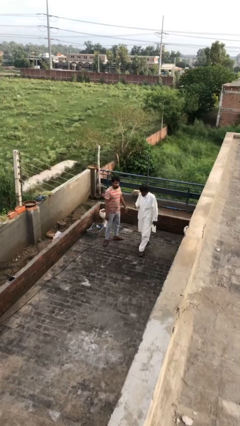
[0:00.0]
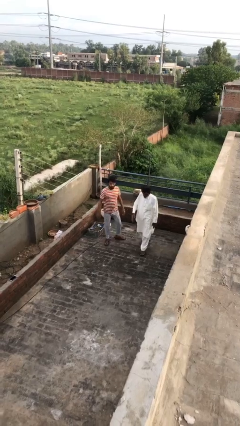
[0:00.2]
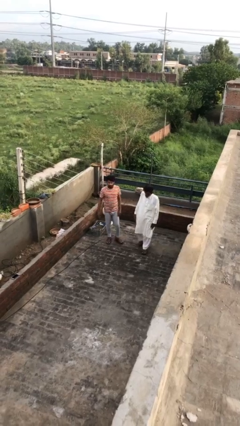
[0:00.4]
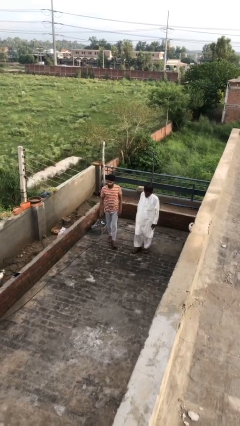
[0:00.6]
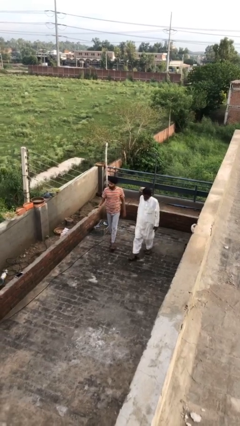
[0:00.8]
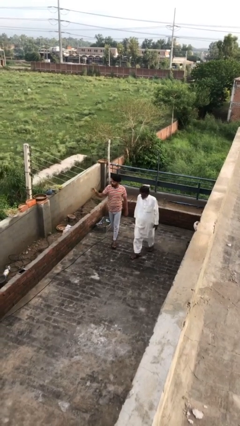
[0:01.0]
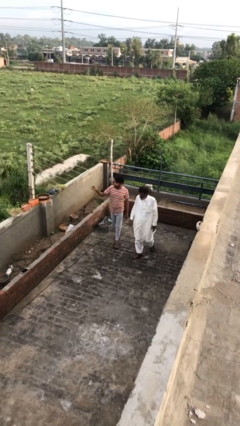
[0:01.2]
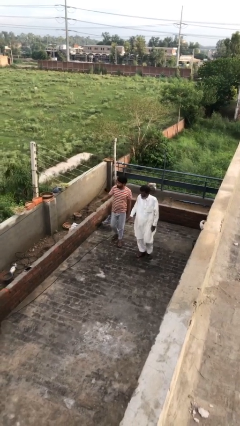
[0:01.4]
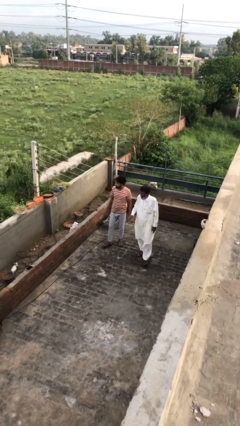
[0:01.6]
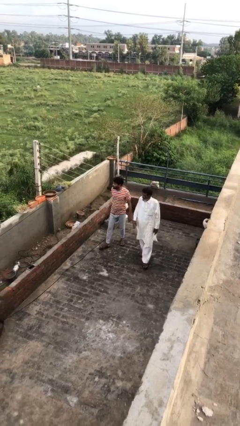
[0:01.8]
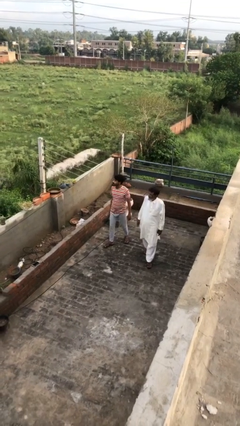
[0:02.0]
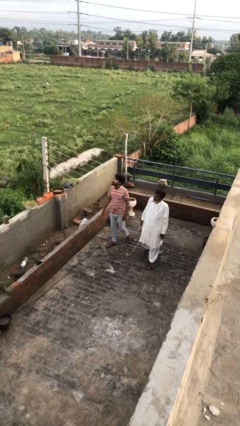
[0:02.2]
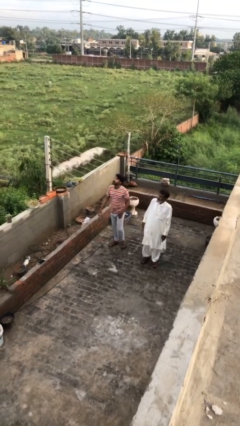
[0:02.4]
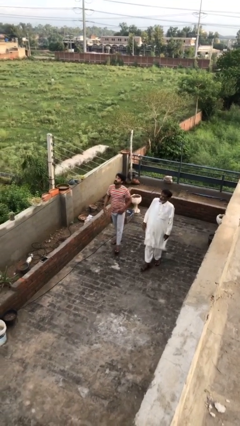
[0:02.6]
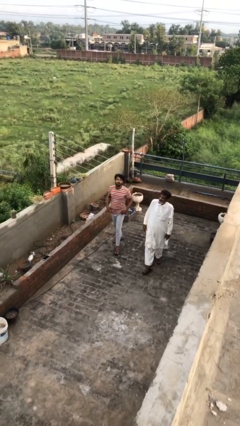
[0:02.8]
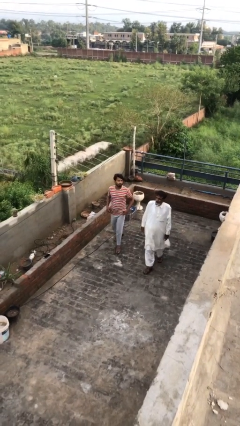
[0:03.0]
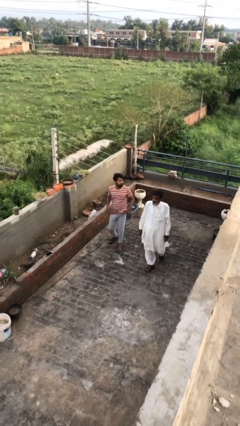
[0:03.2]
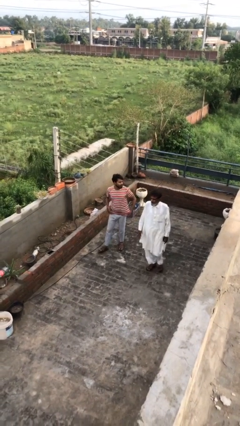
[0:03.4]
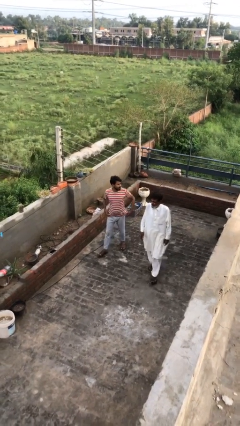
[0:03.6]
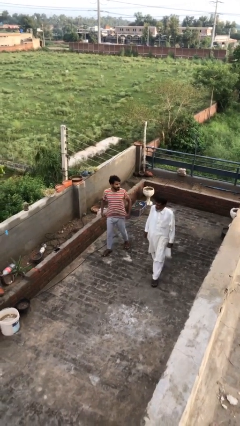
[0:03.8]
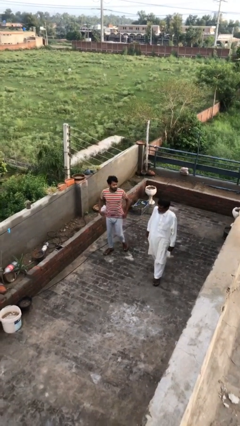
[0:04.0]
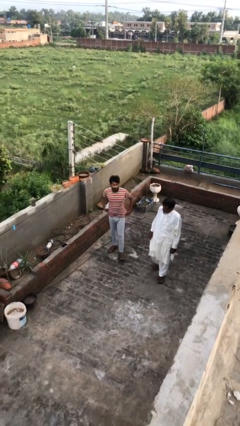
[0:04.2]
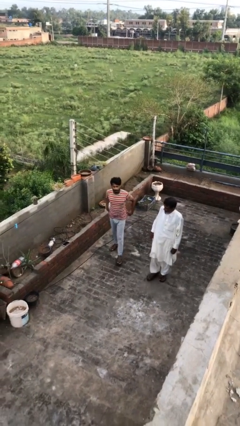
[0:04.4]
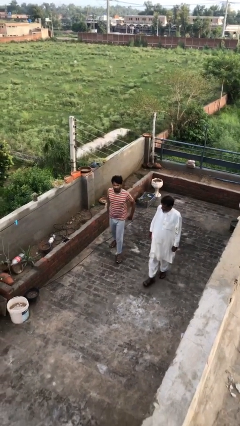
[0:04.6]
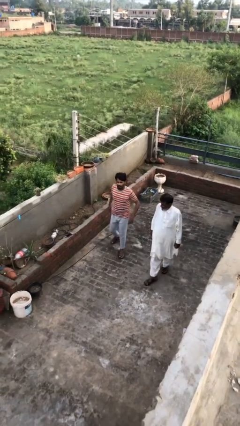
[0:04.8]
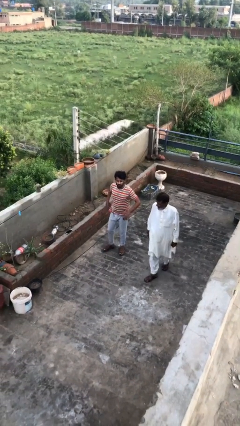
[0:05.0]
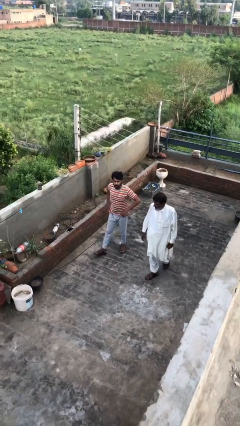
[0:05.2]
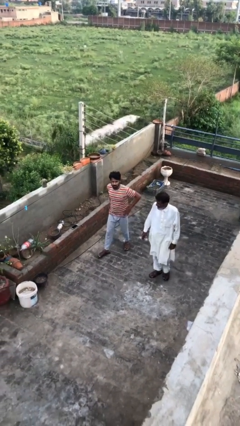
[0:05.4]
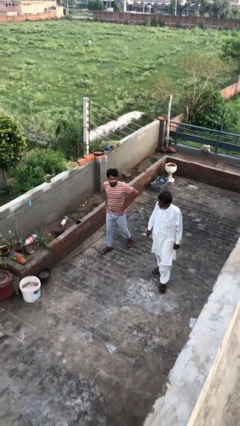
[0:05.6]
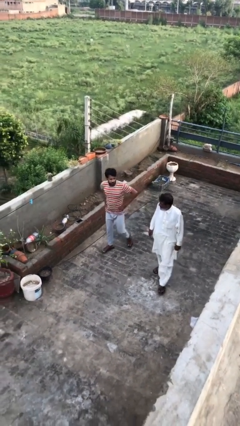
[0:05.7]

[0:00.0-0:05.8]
person talks to person

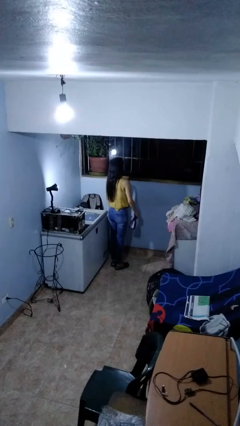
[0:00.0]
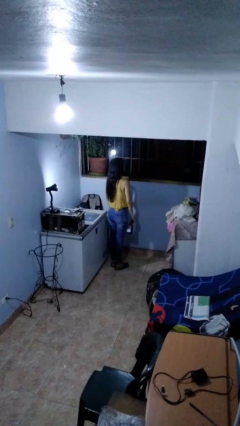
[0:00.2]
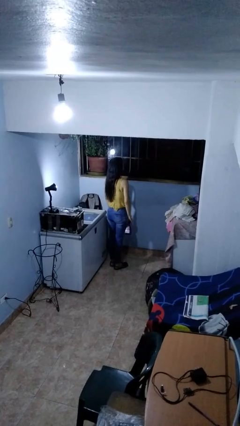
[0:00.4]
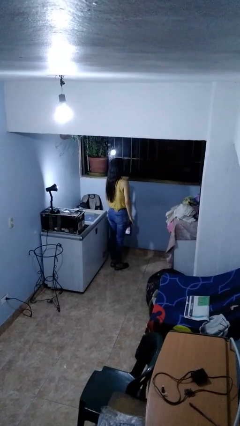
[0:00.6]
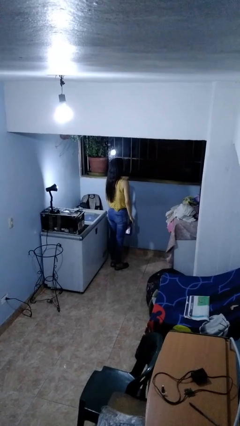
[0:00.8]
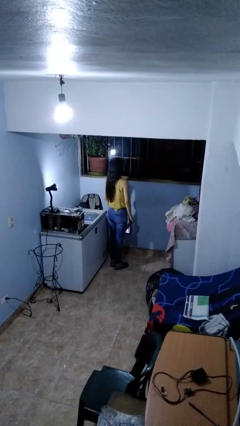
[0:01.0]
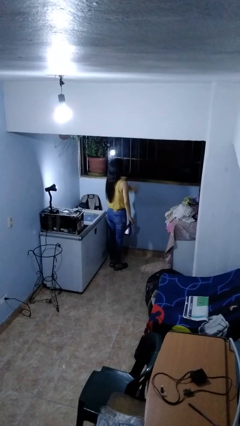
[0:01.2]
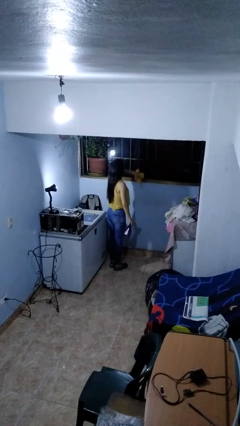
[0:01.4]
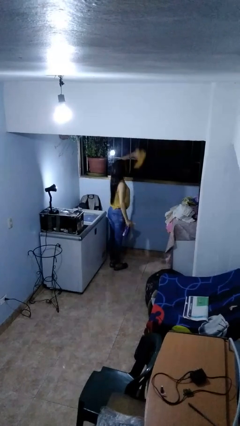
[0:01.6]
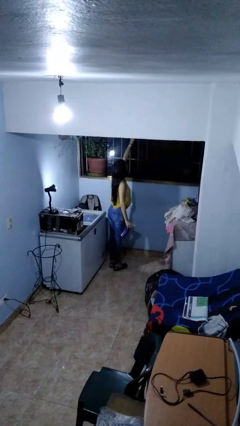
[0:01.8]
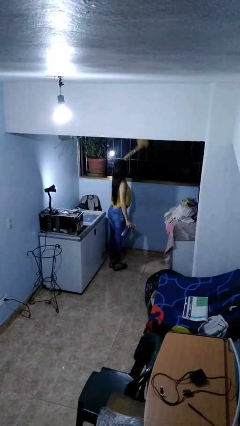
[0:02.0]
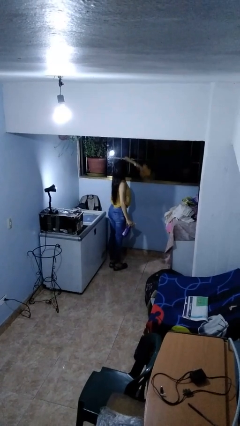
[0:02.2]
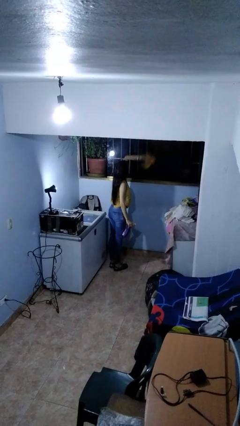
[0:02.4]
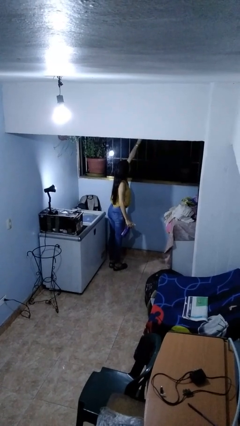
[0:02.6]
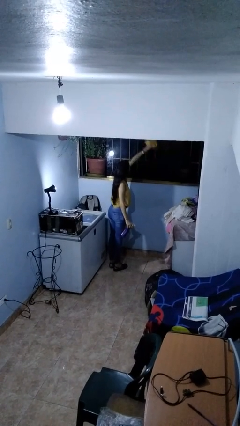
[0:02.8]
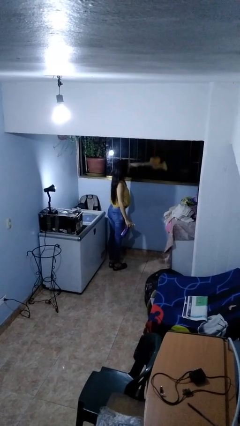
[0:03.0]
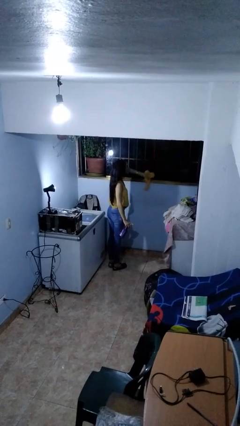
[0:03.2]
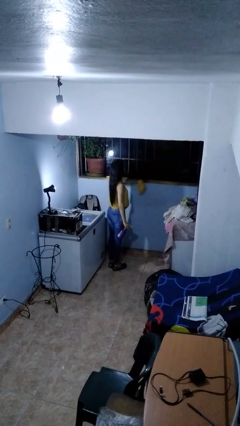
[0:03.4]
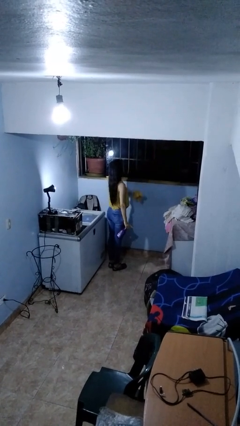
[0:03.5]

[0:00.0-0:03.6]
person washes window

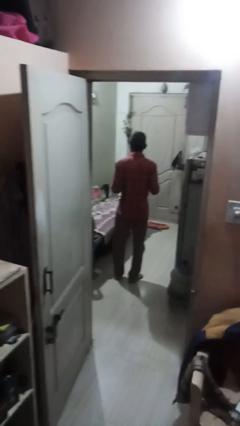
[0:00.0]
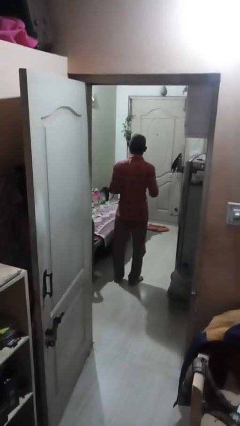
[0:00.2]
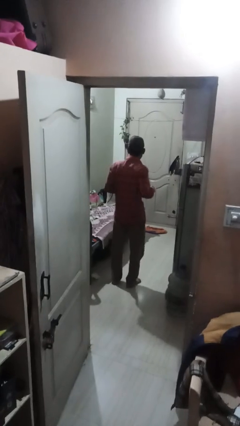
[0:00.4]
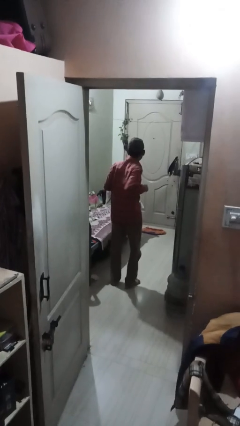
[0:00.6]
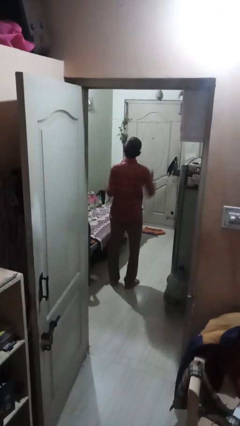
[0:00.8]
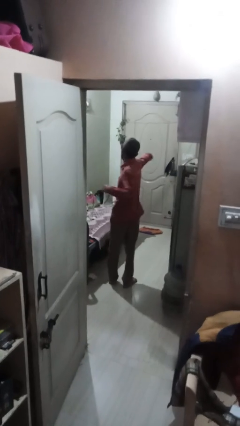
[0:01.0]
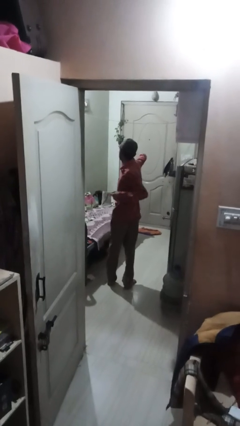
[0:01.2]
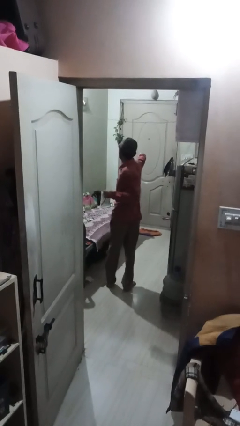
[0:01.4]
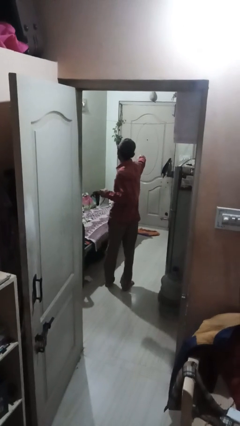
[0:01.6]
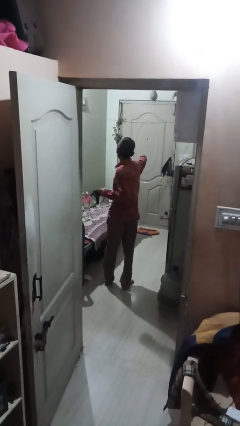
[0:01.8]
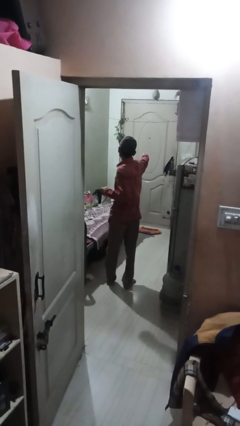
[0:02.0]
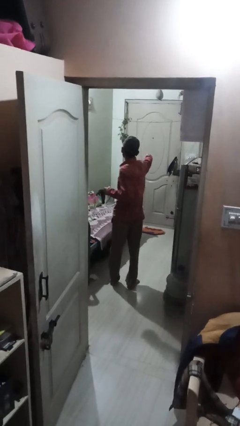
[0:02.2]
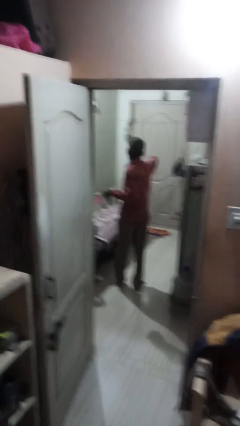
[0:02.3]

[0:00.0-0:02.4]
person punches

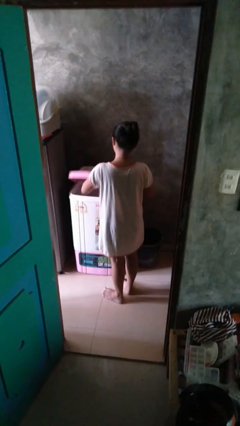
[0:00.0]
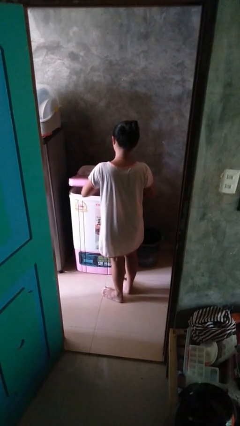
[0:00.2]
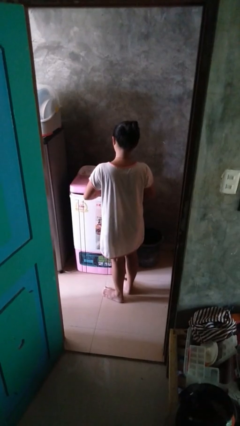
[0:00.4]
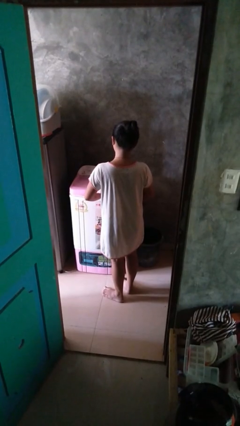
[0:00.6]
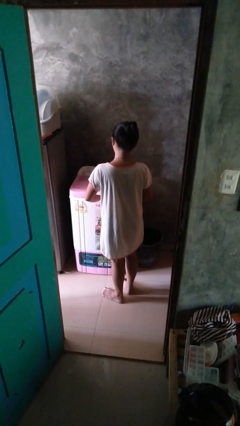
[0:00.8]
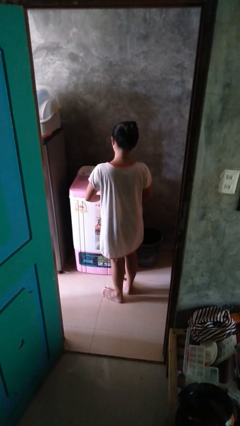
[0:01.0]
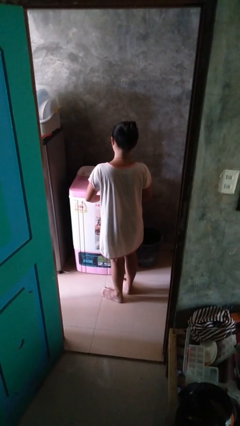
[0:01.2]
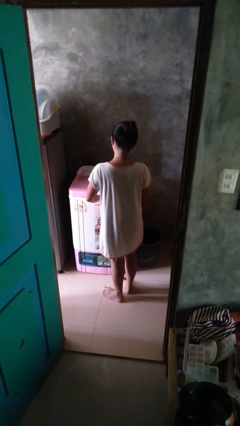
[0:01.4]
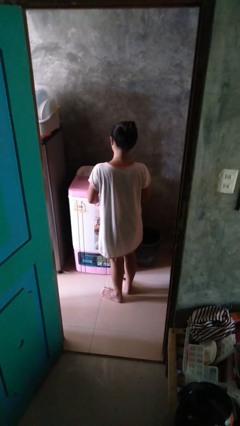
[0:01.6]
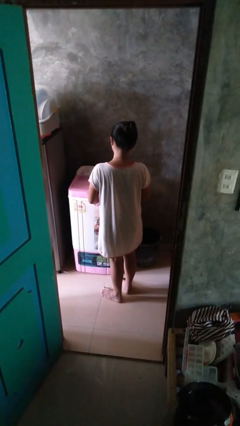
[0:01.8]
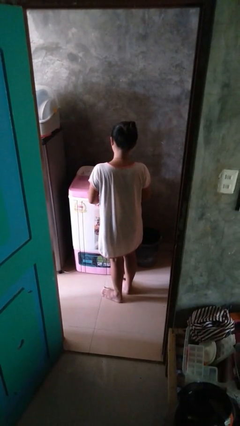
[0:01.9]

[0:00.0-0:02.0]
person closes clothes washer

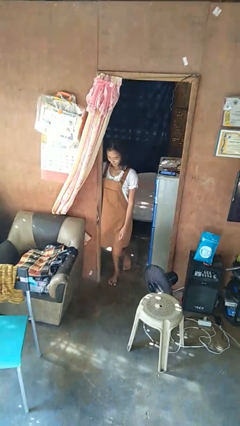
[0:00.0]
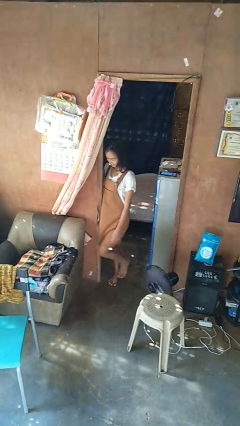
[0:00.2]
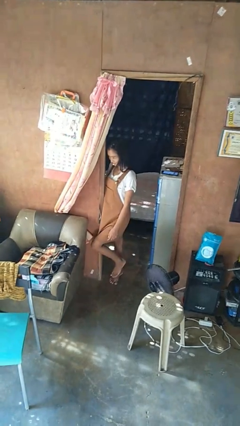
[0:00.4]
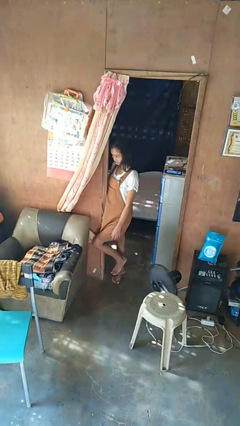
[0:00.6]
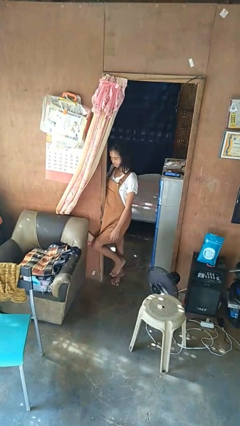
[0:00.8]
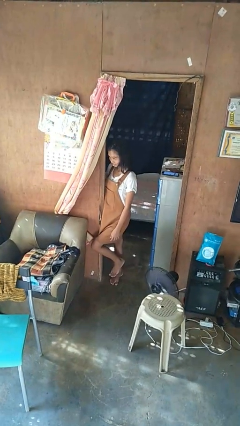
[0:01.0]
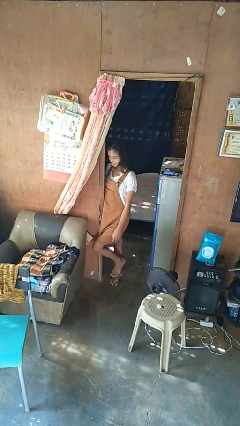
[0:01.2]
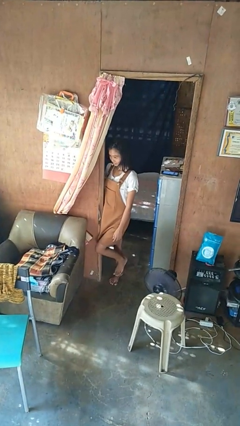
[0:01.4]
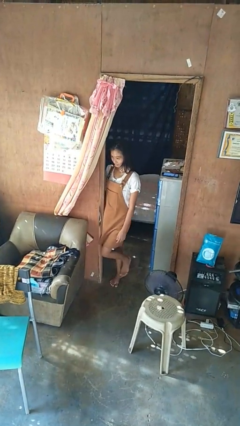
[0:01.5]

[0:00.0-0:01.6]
person bumps into wall

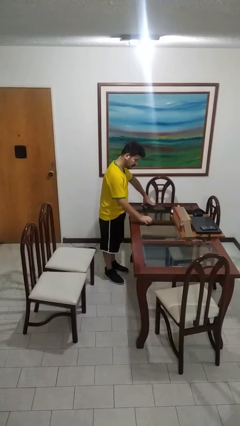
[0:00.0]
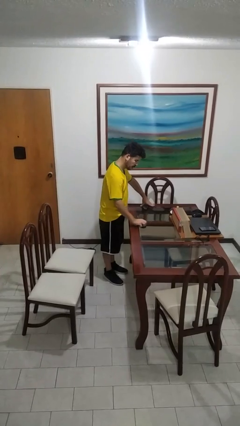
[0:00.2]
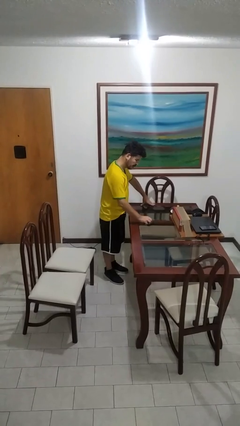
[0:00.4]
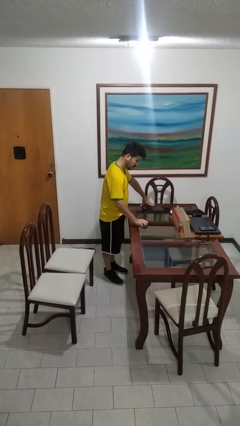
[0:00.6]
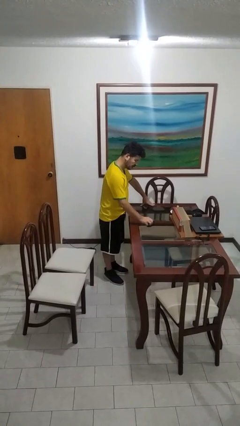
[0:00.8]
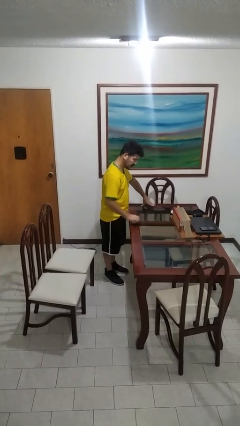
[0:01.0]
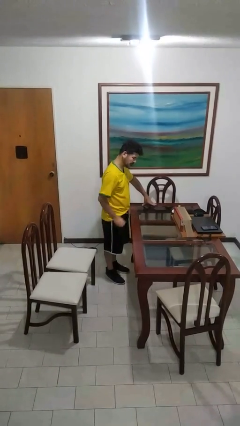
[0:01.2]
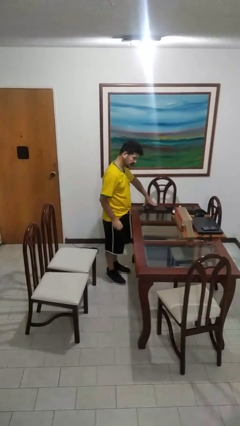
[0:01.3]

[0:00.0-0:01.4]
person cleans table with rag

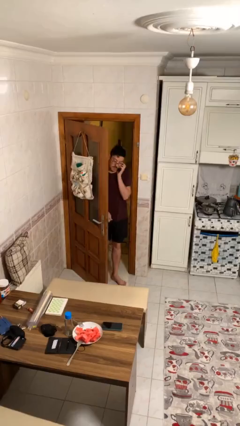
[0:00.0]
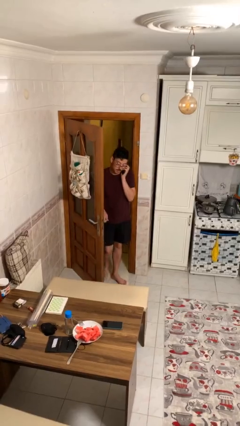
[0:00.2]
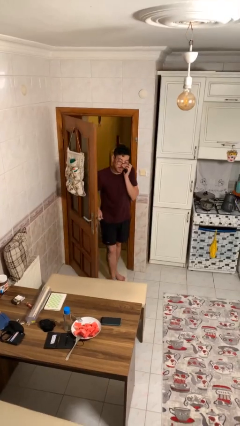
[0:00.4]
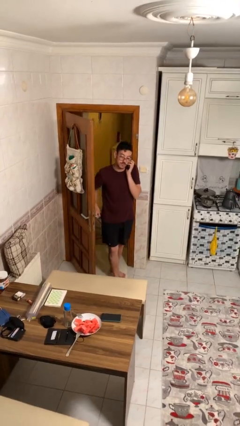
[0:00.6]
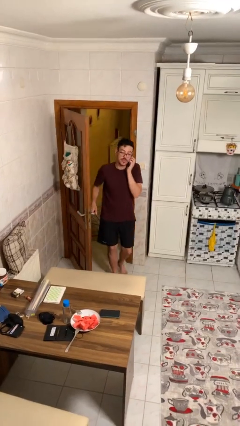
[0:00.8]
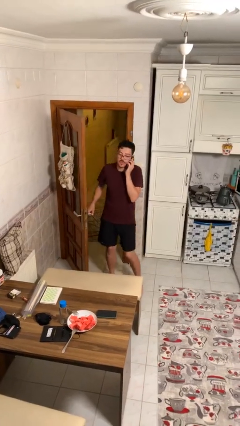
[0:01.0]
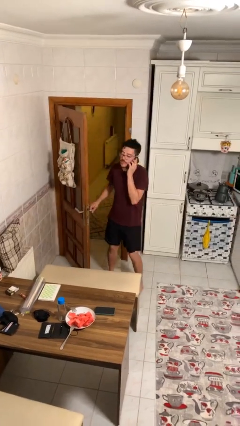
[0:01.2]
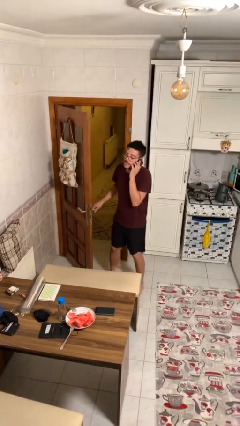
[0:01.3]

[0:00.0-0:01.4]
person enters scene through structure
